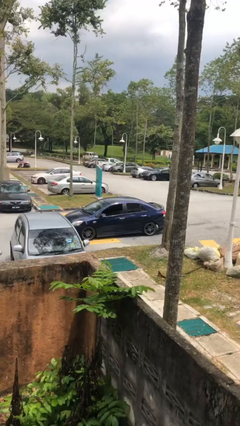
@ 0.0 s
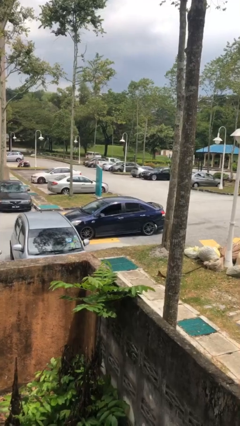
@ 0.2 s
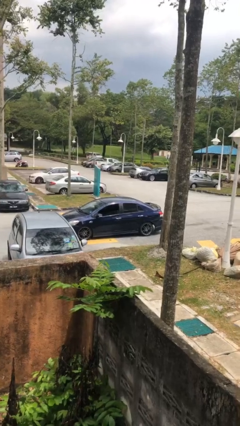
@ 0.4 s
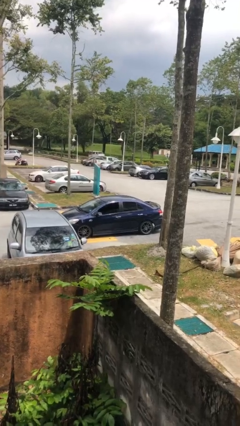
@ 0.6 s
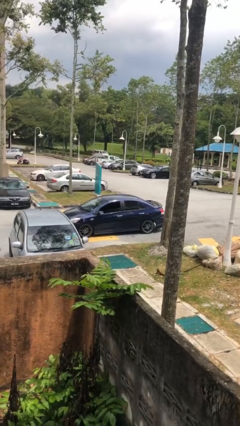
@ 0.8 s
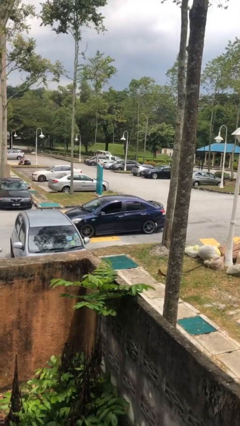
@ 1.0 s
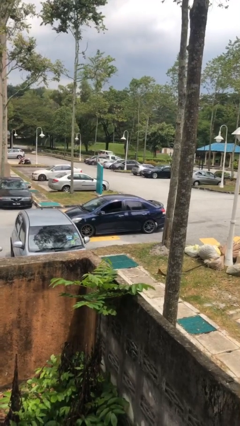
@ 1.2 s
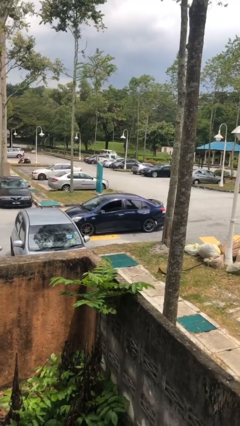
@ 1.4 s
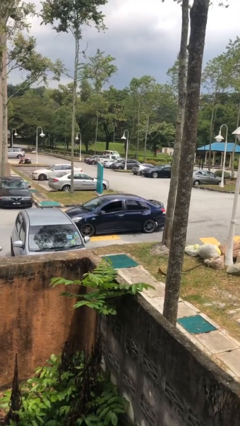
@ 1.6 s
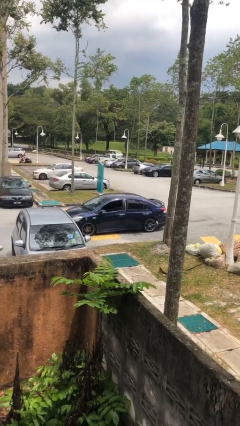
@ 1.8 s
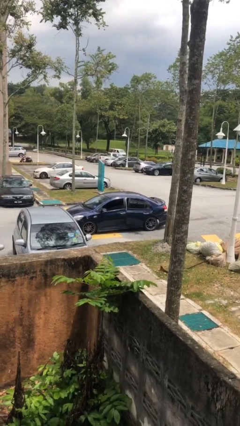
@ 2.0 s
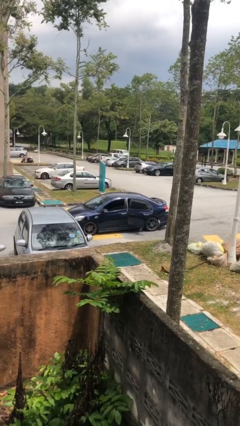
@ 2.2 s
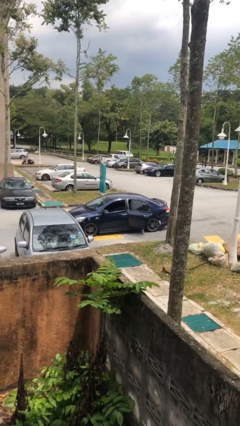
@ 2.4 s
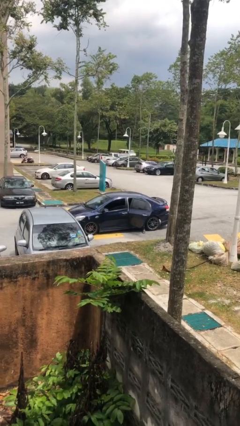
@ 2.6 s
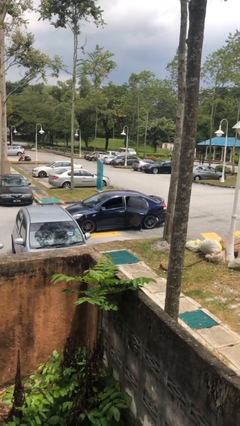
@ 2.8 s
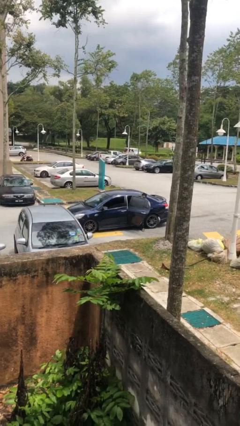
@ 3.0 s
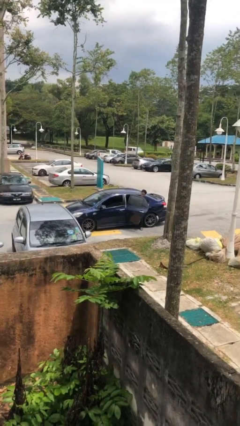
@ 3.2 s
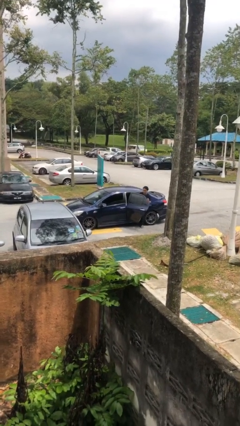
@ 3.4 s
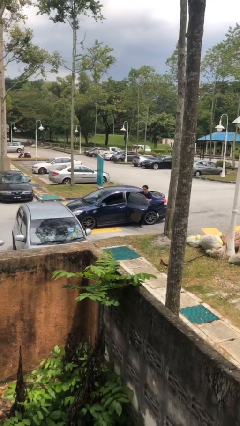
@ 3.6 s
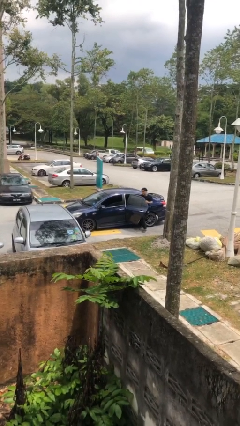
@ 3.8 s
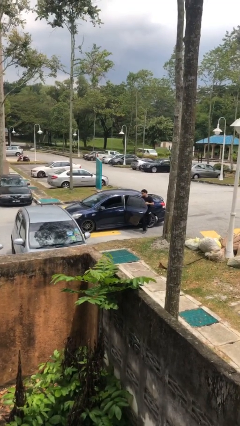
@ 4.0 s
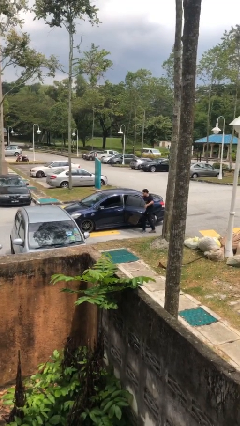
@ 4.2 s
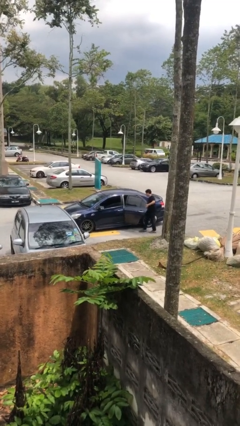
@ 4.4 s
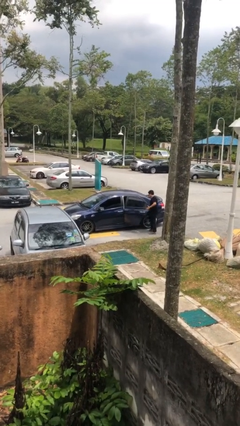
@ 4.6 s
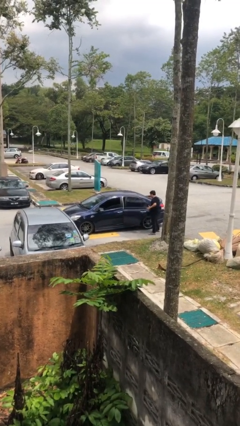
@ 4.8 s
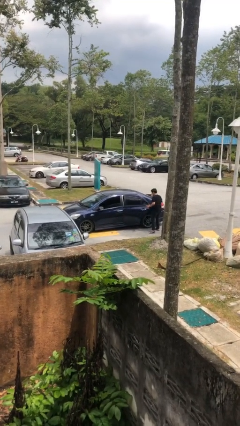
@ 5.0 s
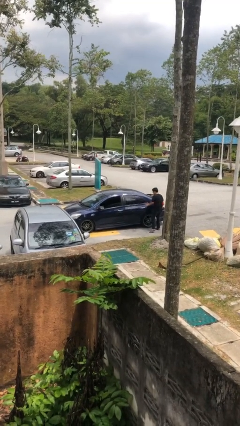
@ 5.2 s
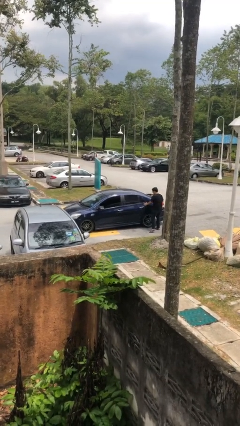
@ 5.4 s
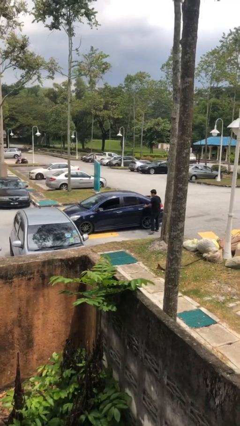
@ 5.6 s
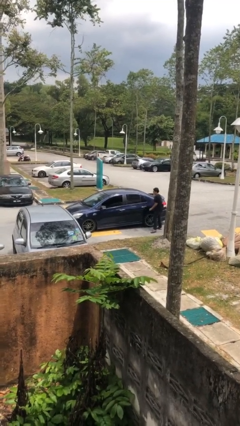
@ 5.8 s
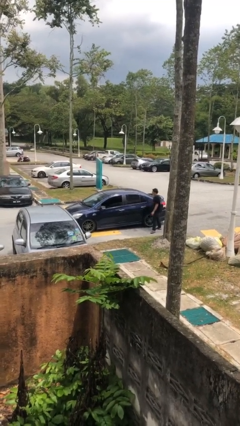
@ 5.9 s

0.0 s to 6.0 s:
car drops off person

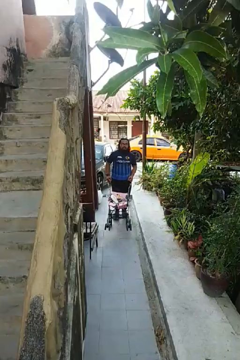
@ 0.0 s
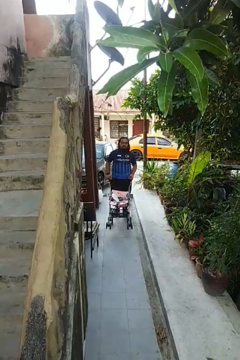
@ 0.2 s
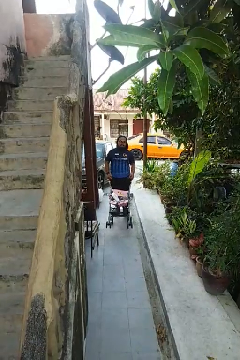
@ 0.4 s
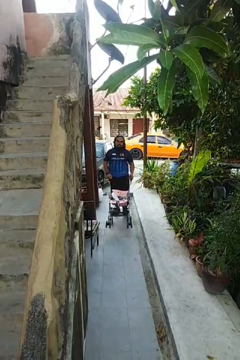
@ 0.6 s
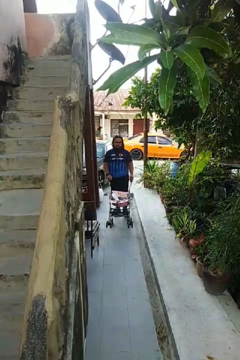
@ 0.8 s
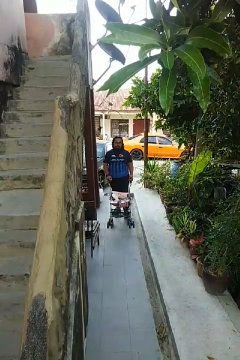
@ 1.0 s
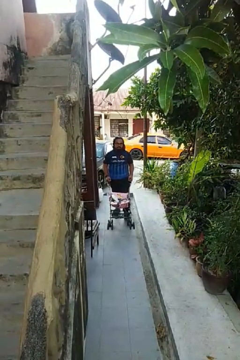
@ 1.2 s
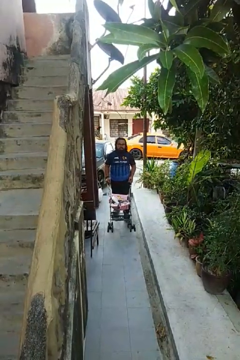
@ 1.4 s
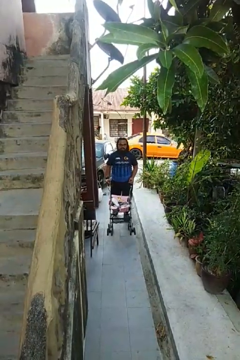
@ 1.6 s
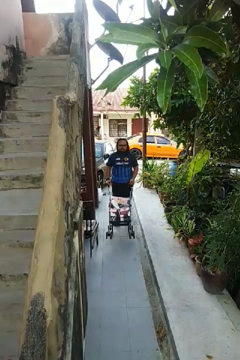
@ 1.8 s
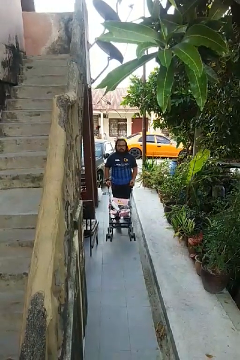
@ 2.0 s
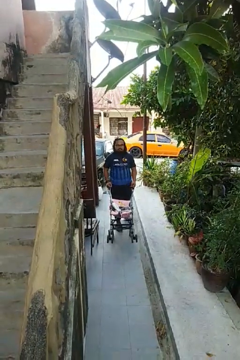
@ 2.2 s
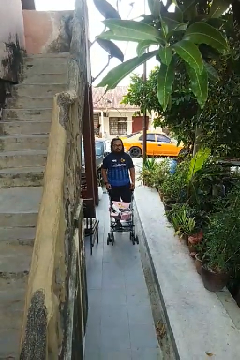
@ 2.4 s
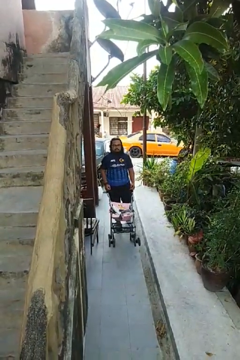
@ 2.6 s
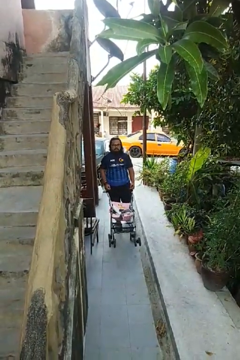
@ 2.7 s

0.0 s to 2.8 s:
person pushes wheeled cart

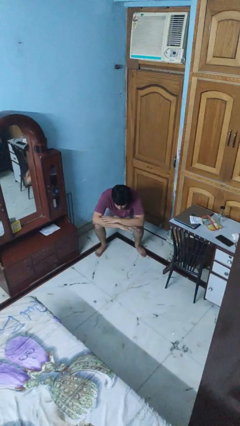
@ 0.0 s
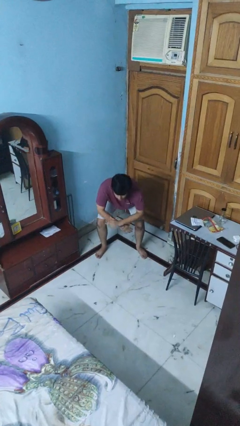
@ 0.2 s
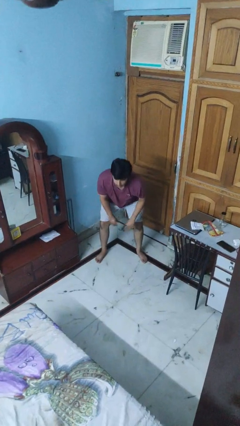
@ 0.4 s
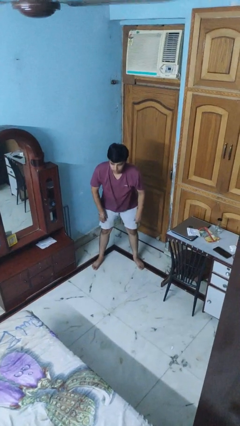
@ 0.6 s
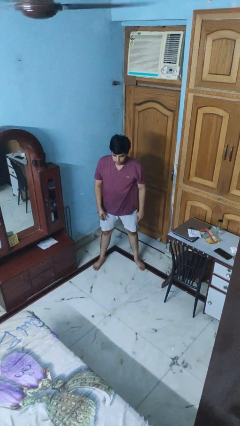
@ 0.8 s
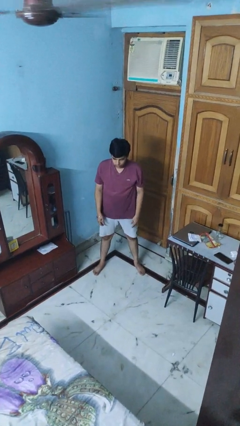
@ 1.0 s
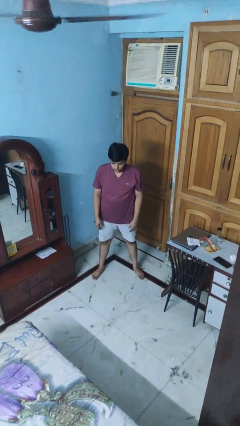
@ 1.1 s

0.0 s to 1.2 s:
person stands up

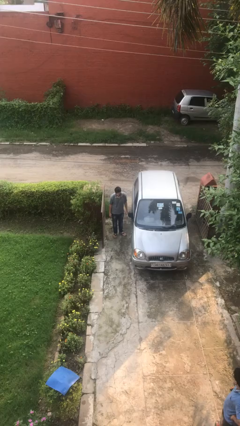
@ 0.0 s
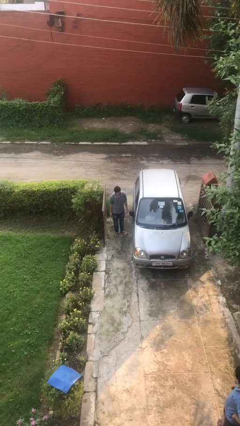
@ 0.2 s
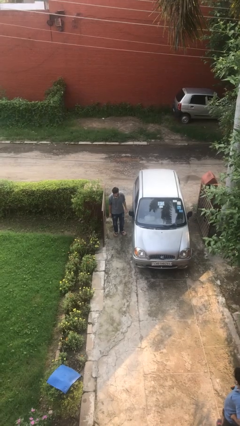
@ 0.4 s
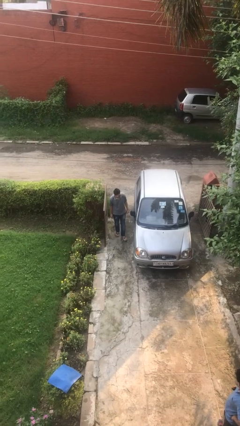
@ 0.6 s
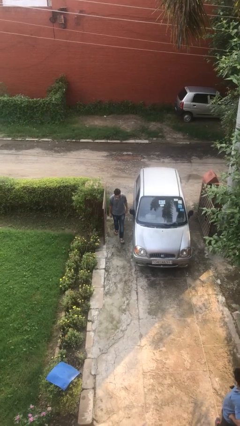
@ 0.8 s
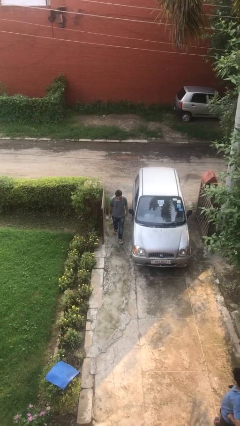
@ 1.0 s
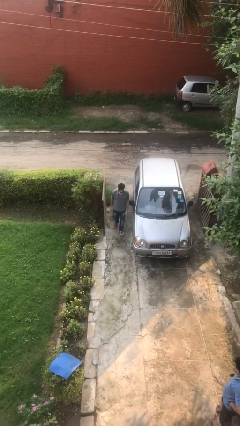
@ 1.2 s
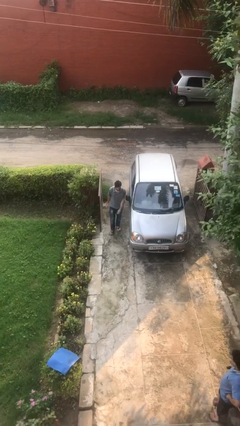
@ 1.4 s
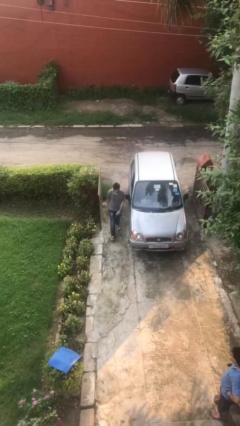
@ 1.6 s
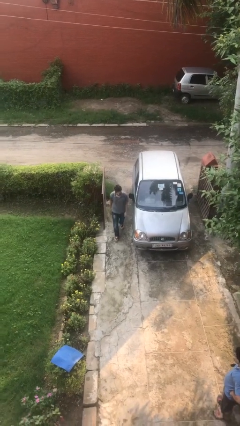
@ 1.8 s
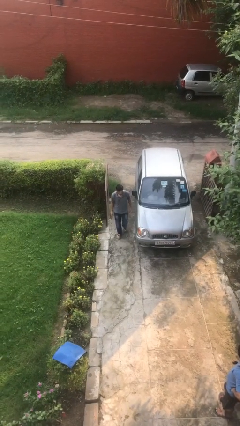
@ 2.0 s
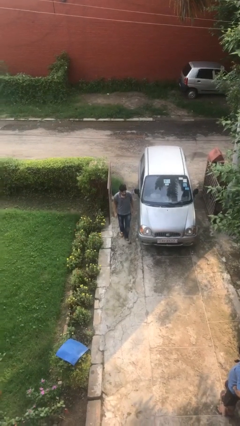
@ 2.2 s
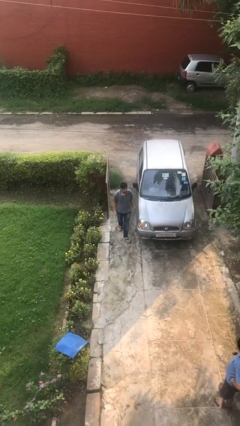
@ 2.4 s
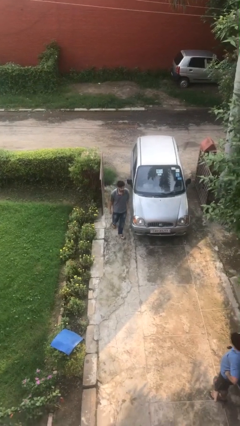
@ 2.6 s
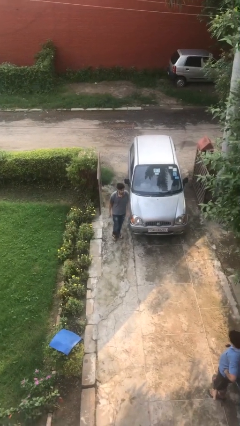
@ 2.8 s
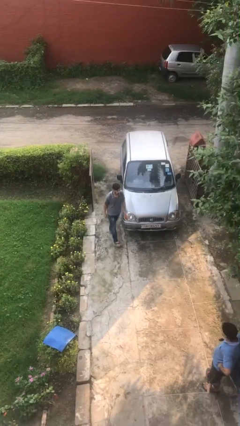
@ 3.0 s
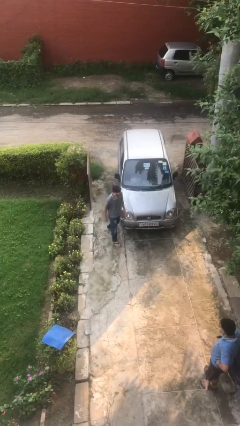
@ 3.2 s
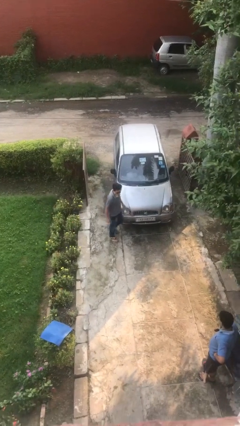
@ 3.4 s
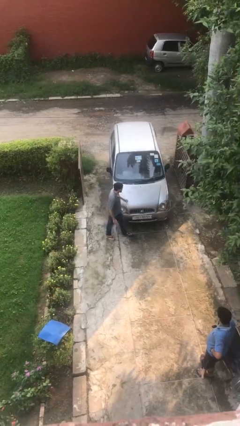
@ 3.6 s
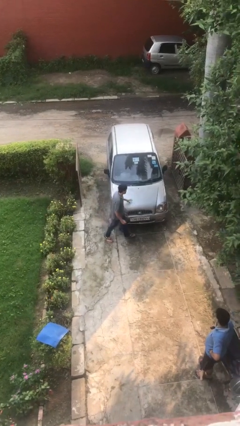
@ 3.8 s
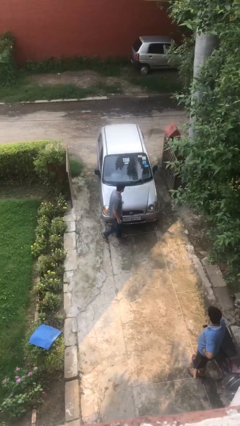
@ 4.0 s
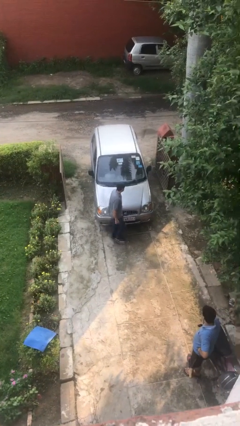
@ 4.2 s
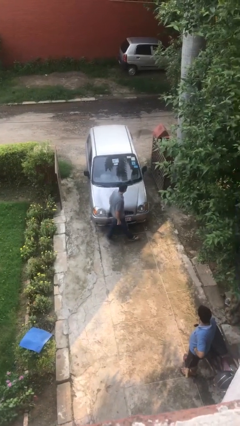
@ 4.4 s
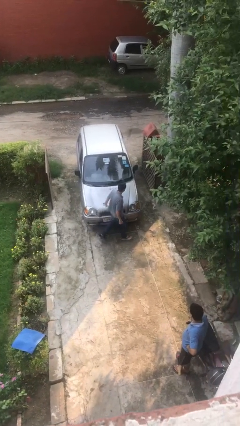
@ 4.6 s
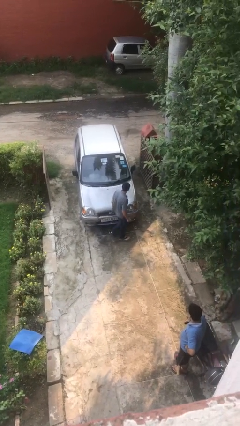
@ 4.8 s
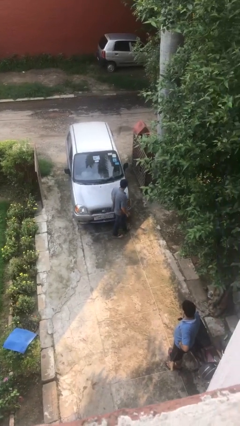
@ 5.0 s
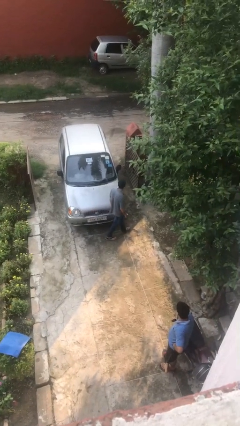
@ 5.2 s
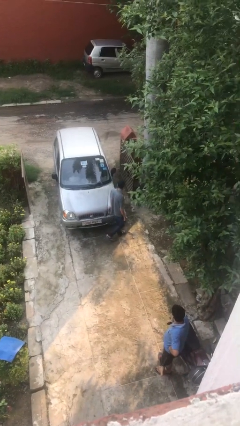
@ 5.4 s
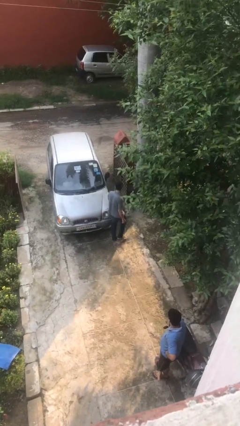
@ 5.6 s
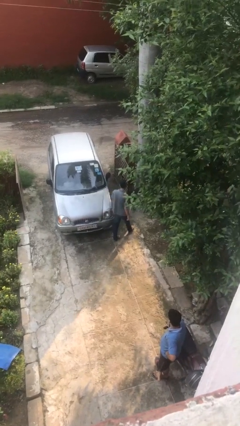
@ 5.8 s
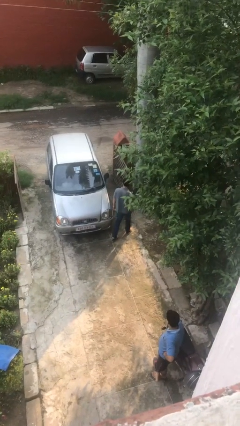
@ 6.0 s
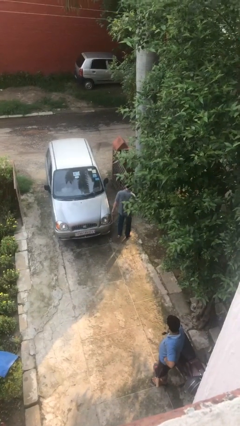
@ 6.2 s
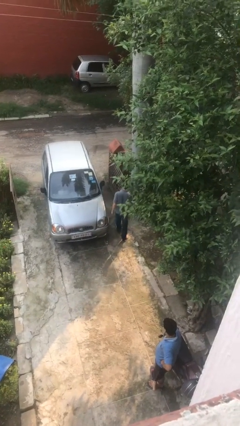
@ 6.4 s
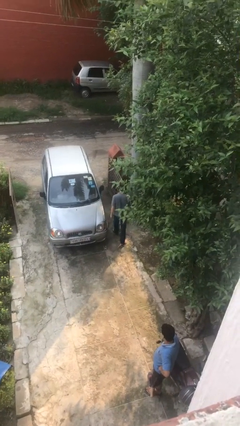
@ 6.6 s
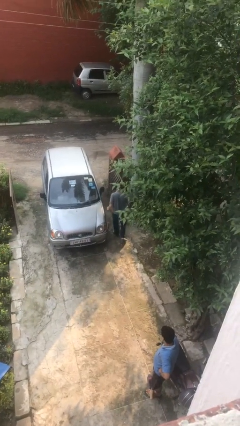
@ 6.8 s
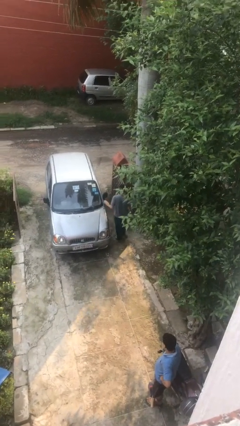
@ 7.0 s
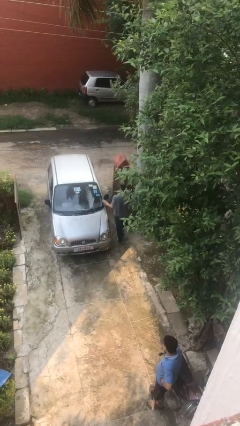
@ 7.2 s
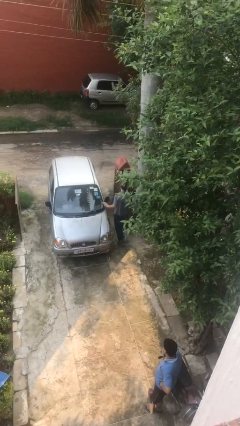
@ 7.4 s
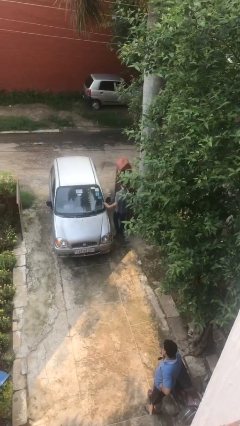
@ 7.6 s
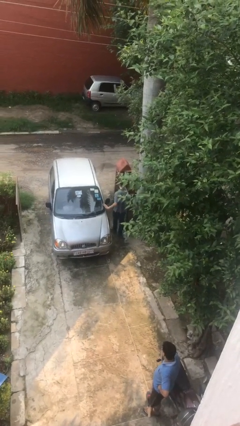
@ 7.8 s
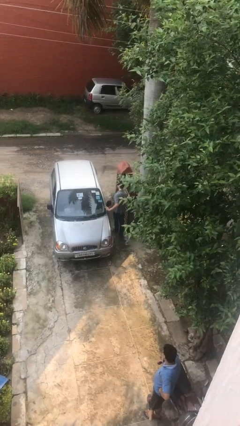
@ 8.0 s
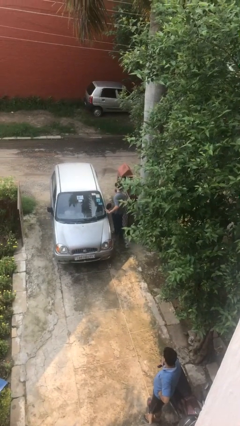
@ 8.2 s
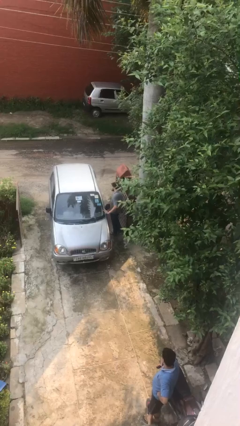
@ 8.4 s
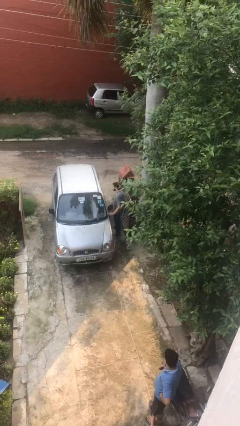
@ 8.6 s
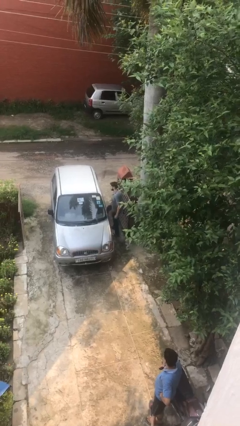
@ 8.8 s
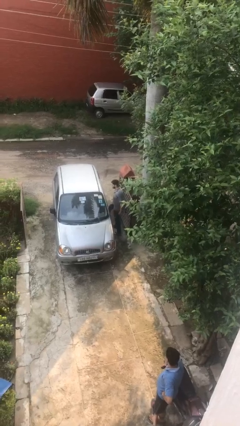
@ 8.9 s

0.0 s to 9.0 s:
person walks around car
